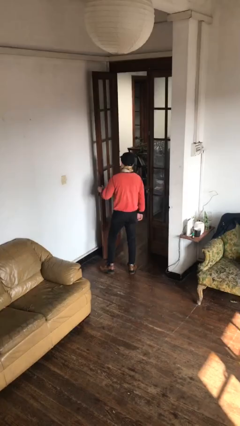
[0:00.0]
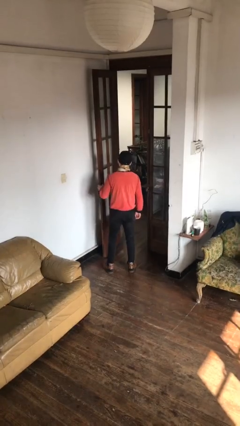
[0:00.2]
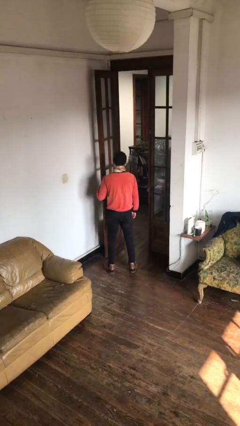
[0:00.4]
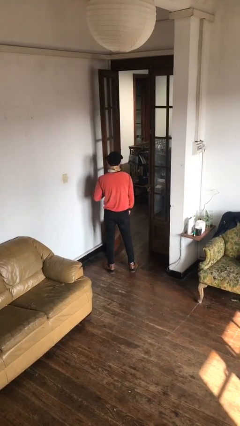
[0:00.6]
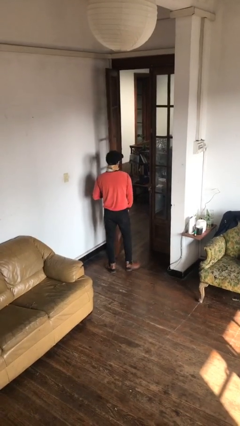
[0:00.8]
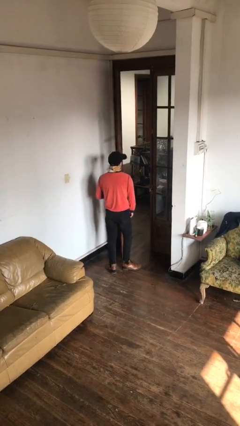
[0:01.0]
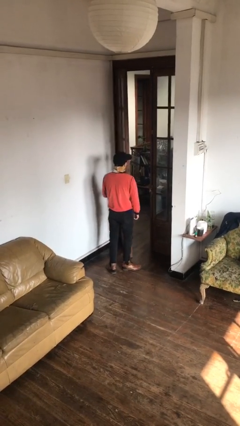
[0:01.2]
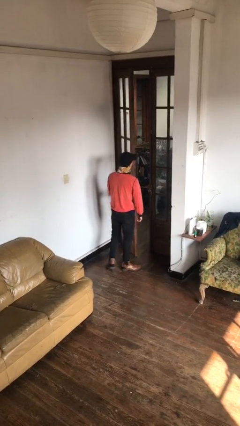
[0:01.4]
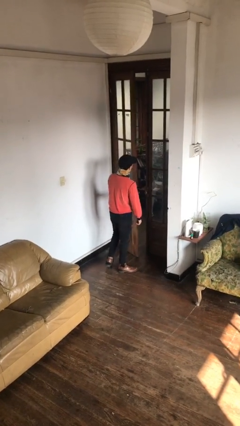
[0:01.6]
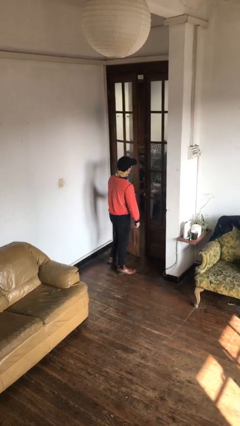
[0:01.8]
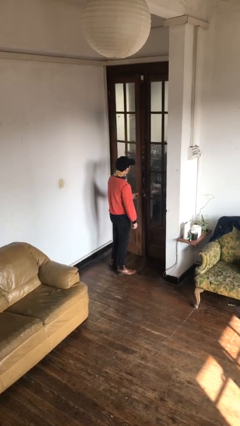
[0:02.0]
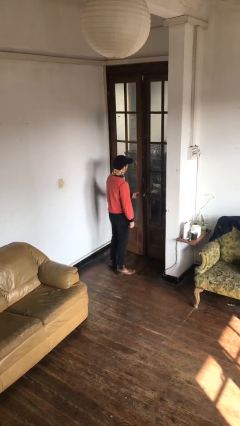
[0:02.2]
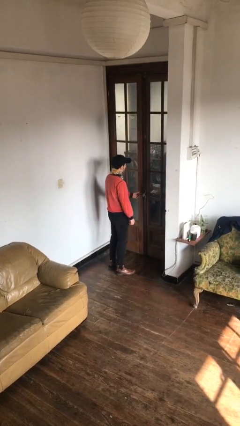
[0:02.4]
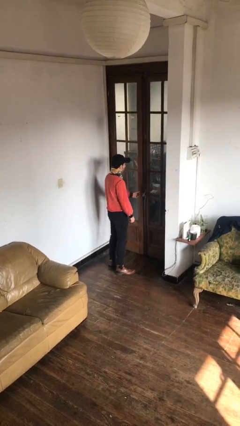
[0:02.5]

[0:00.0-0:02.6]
person closes facility door

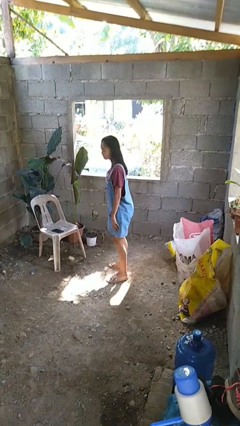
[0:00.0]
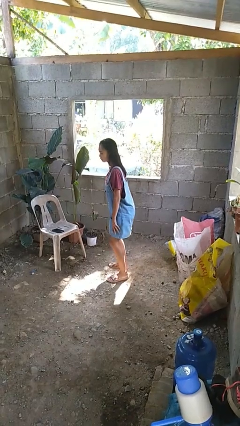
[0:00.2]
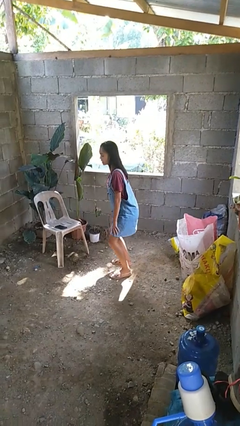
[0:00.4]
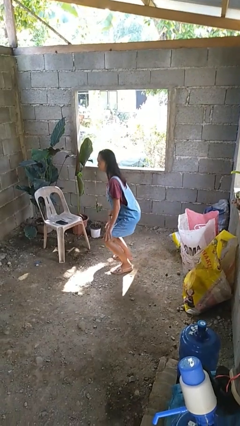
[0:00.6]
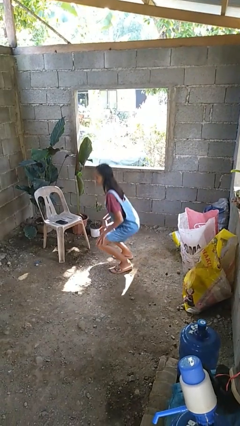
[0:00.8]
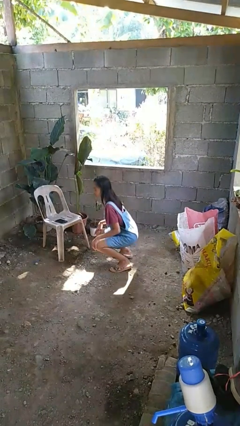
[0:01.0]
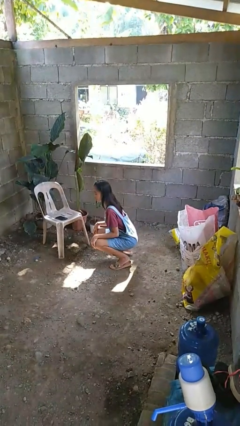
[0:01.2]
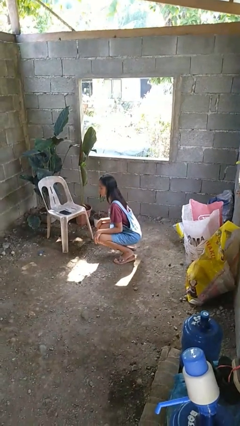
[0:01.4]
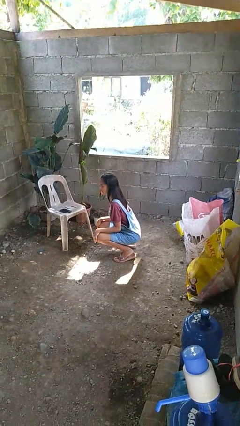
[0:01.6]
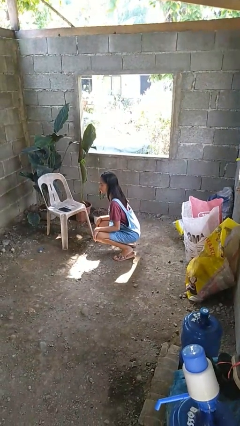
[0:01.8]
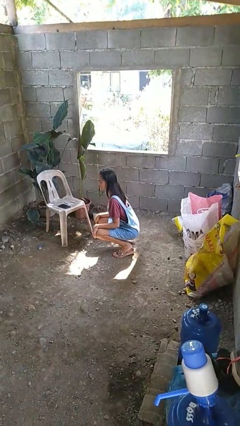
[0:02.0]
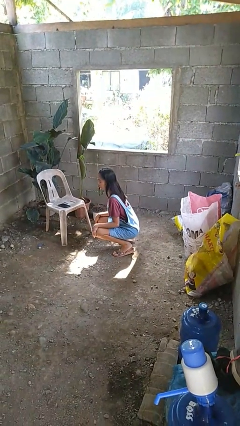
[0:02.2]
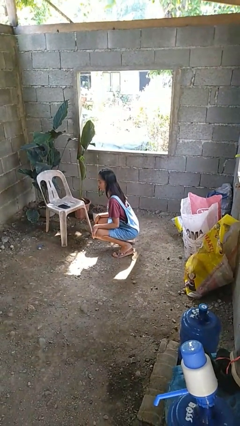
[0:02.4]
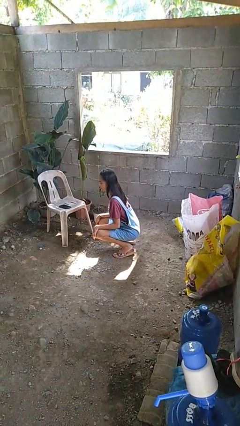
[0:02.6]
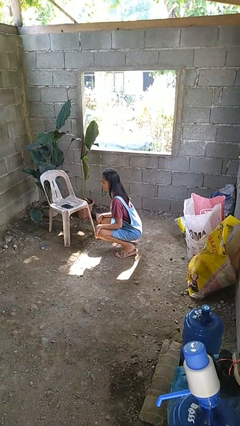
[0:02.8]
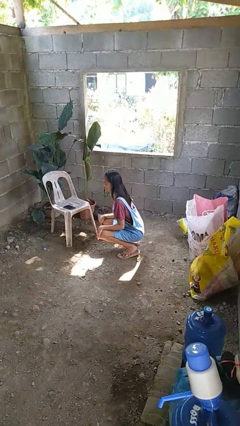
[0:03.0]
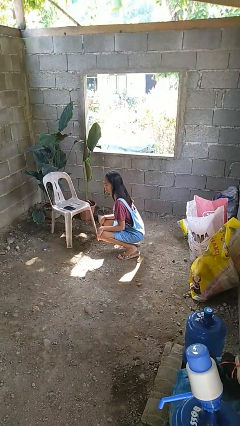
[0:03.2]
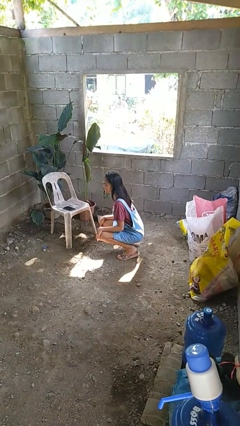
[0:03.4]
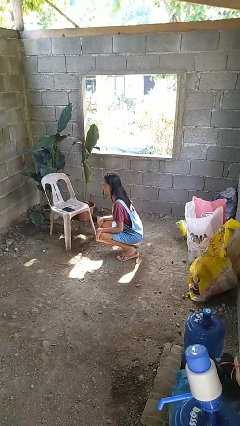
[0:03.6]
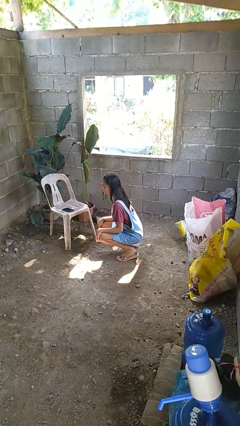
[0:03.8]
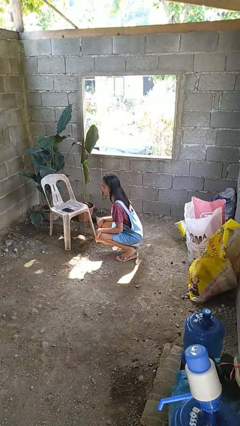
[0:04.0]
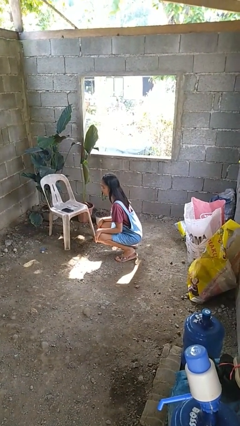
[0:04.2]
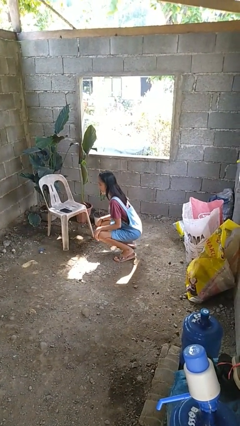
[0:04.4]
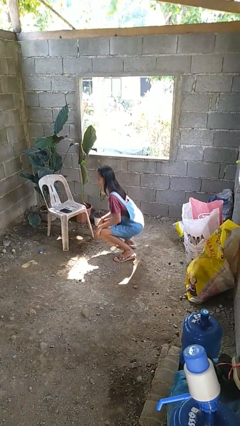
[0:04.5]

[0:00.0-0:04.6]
person squats

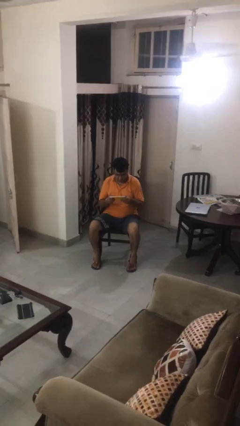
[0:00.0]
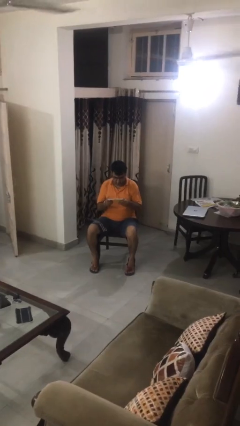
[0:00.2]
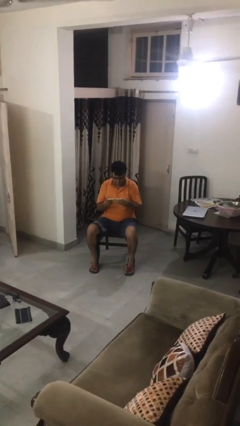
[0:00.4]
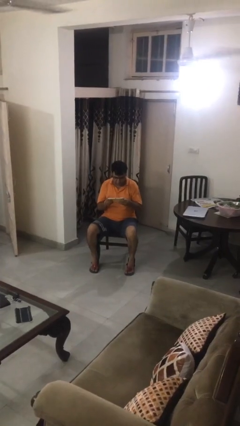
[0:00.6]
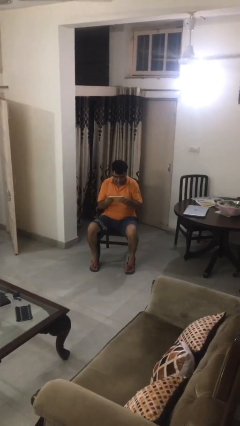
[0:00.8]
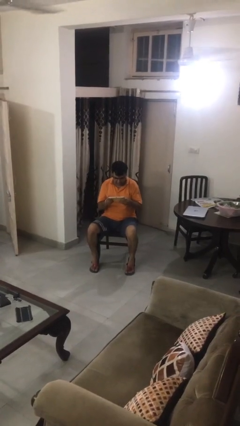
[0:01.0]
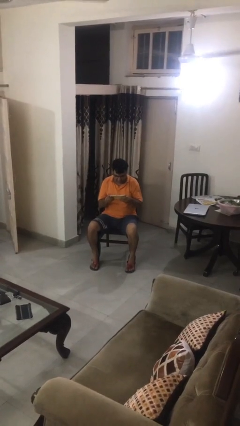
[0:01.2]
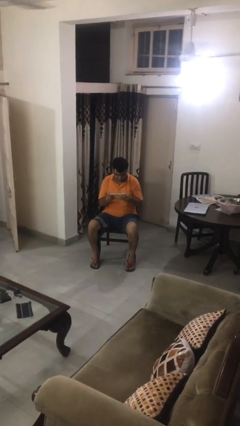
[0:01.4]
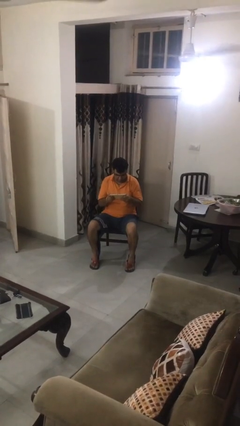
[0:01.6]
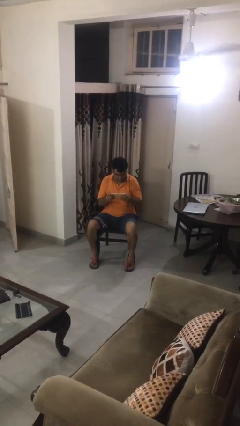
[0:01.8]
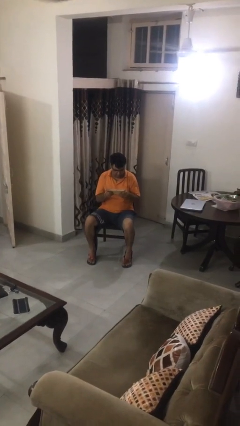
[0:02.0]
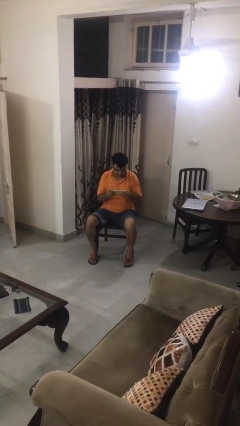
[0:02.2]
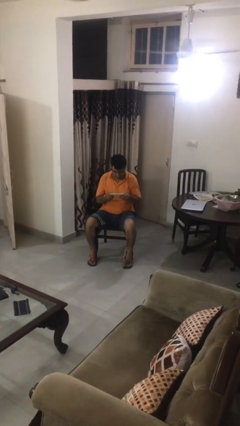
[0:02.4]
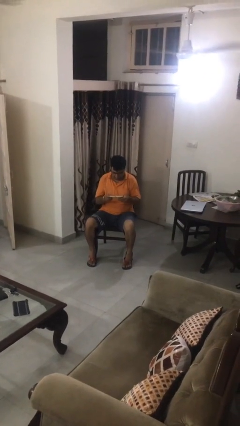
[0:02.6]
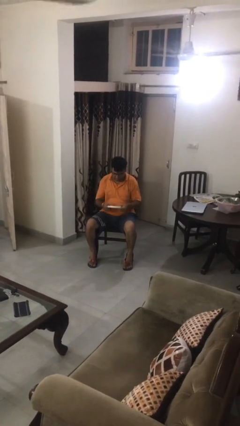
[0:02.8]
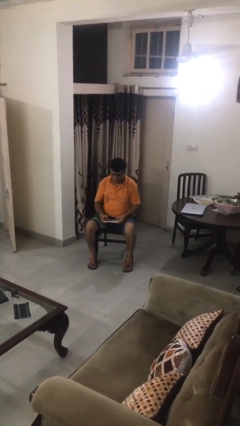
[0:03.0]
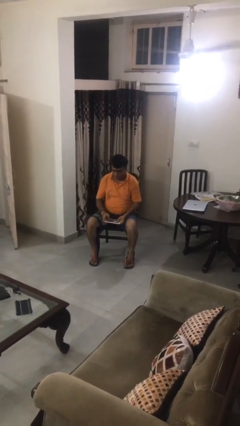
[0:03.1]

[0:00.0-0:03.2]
person interacts with handheld game

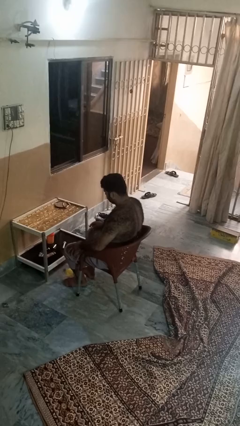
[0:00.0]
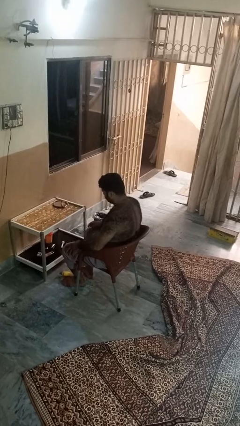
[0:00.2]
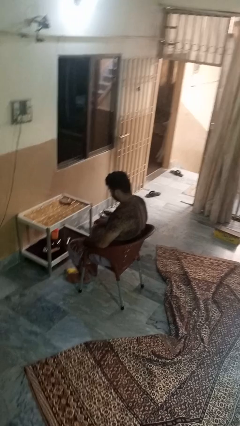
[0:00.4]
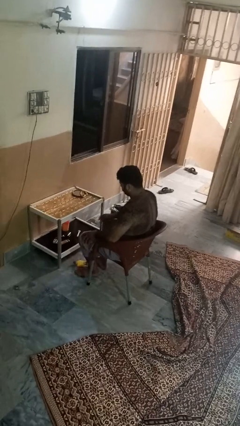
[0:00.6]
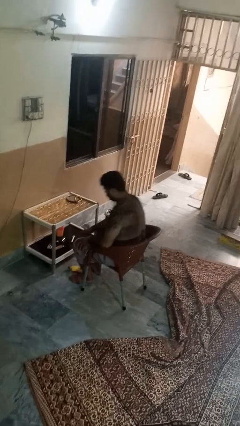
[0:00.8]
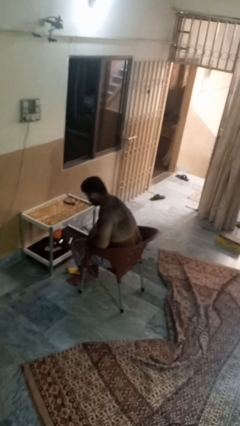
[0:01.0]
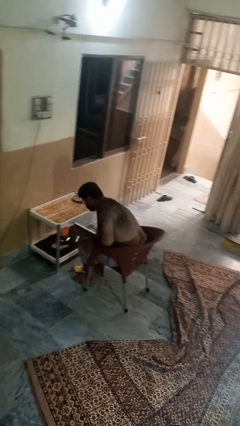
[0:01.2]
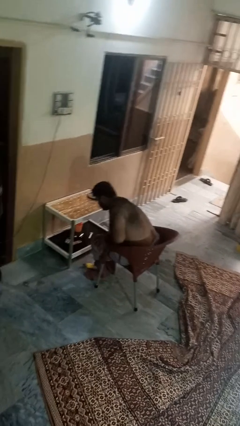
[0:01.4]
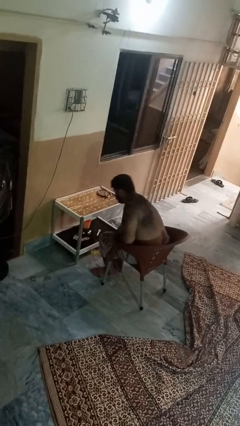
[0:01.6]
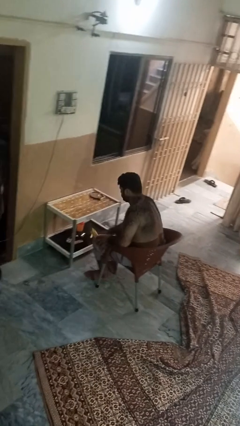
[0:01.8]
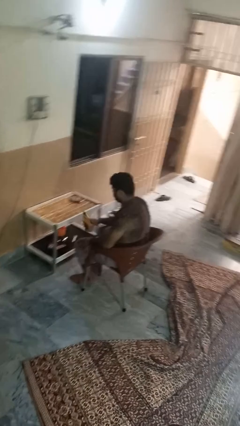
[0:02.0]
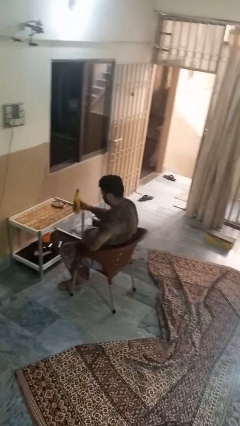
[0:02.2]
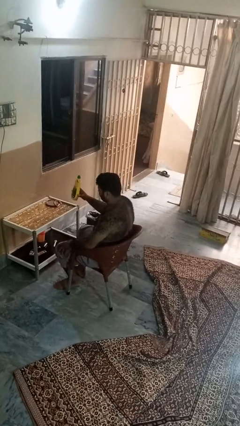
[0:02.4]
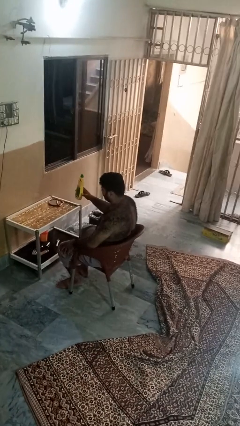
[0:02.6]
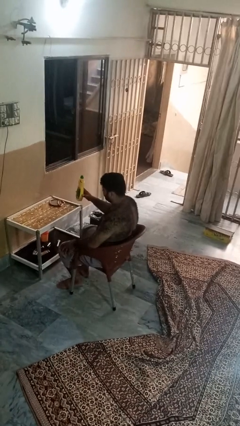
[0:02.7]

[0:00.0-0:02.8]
person picks up object from floor

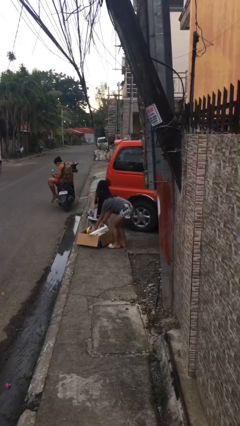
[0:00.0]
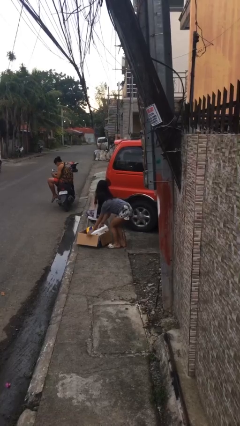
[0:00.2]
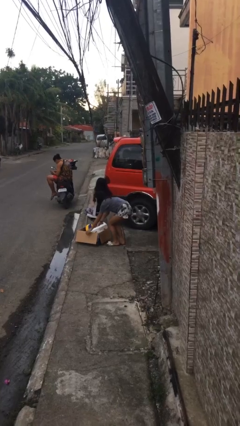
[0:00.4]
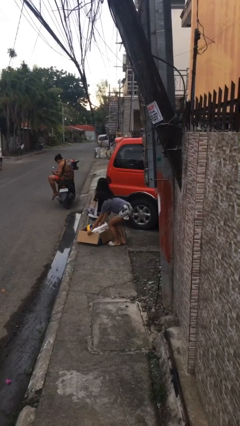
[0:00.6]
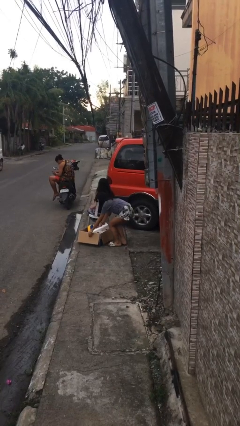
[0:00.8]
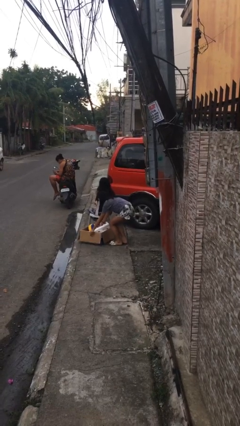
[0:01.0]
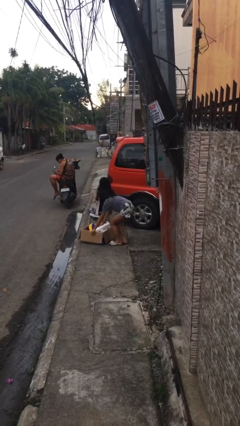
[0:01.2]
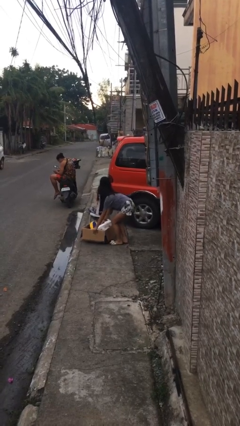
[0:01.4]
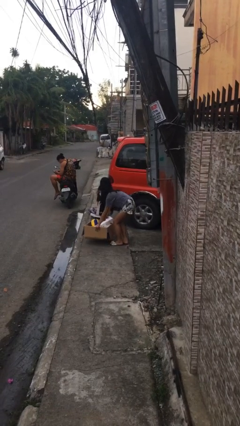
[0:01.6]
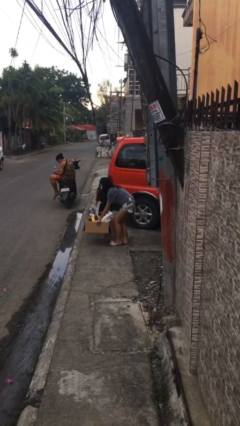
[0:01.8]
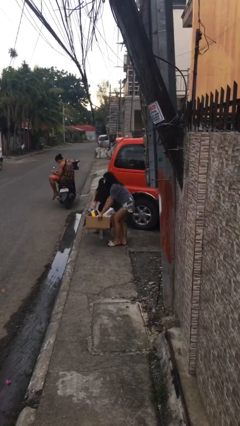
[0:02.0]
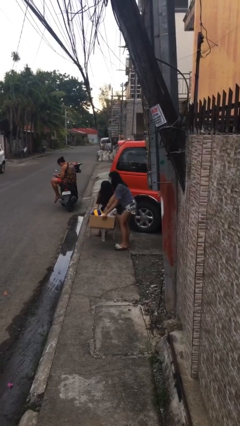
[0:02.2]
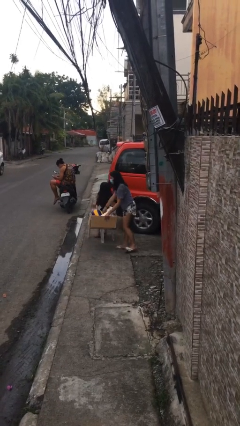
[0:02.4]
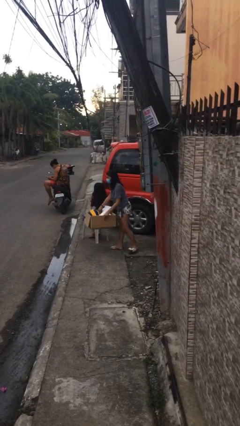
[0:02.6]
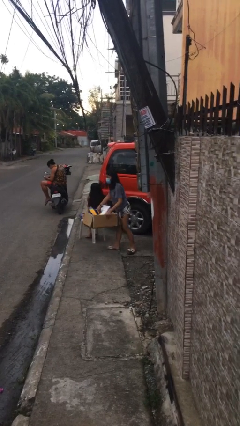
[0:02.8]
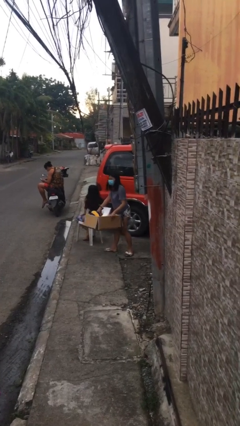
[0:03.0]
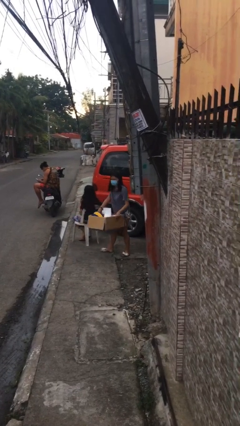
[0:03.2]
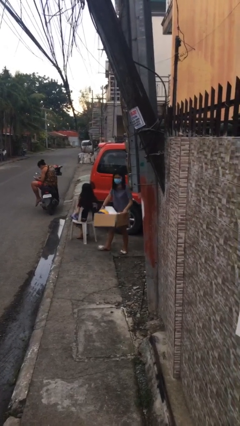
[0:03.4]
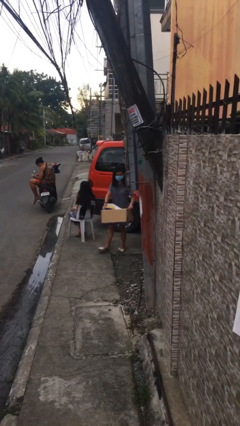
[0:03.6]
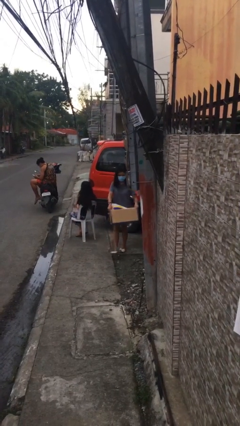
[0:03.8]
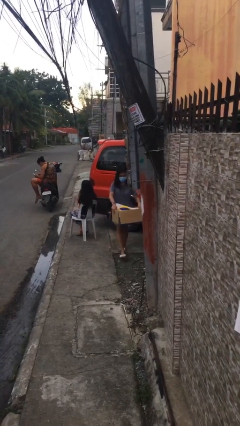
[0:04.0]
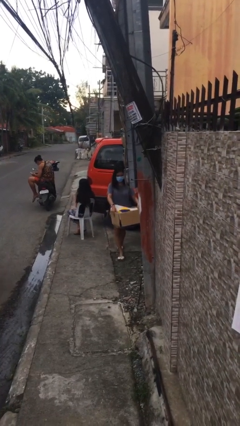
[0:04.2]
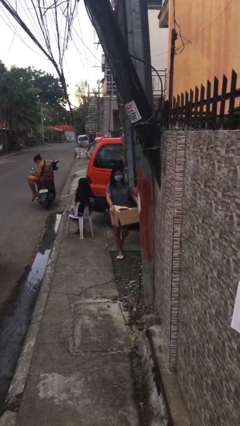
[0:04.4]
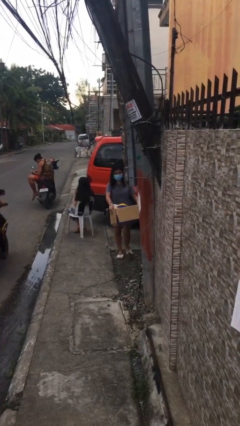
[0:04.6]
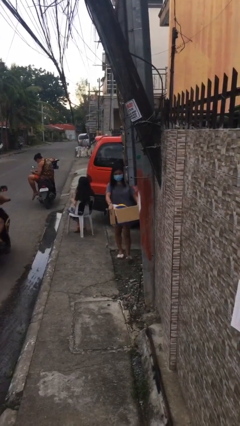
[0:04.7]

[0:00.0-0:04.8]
person steals object from person
